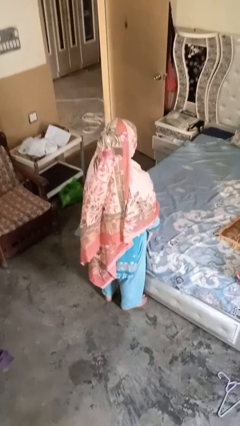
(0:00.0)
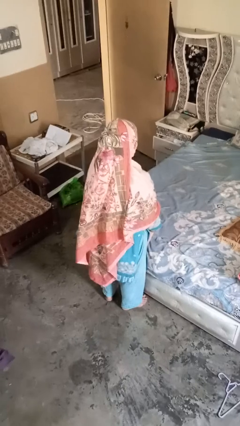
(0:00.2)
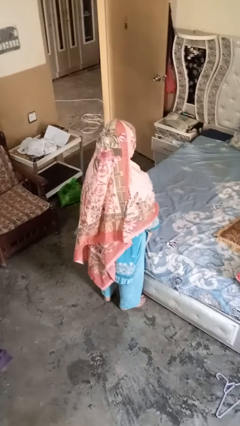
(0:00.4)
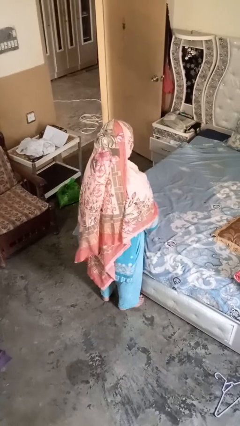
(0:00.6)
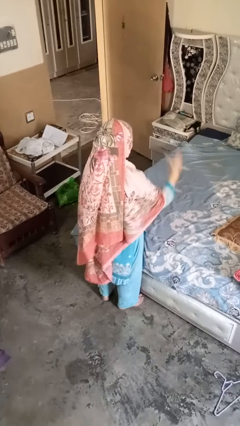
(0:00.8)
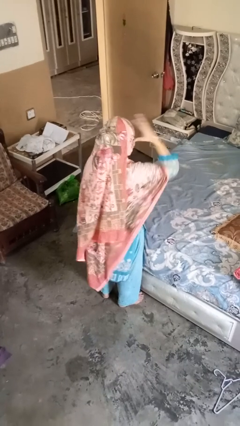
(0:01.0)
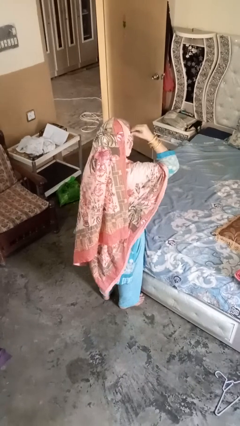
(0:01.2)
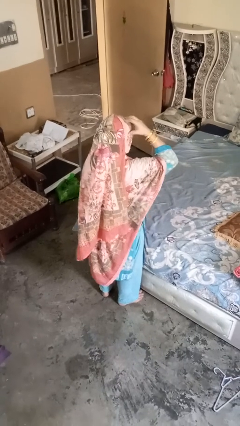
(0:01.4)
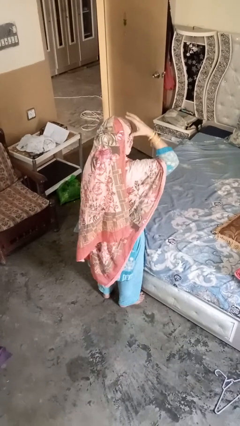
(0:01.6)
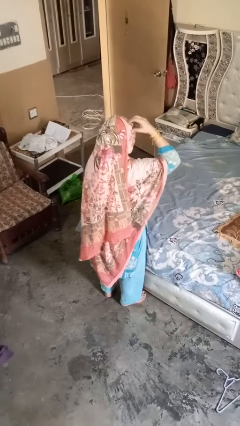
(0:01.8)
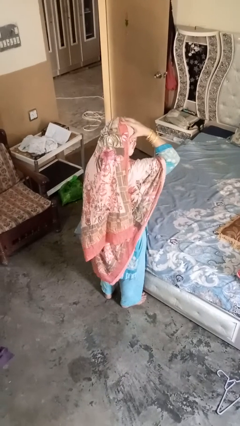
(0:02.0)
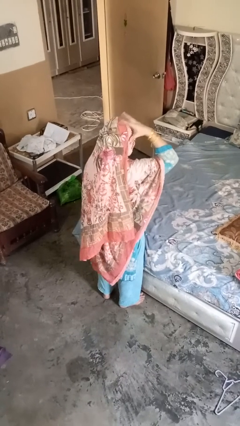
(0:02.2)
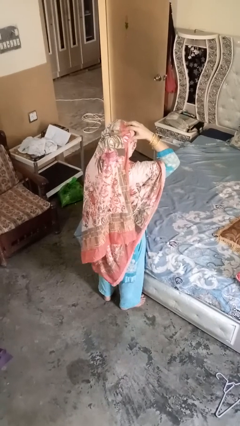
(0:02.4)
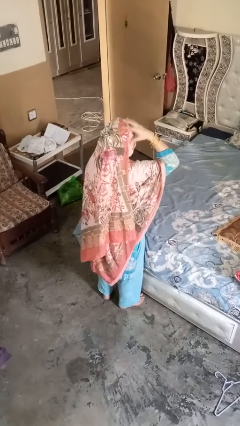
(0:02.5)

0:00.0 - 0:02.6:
person strokes hair

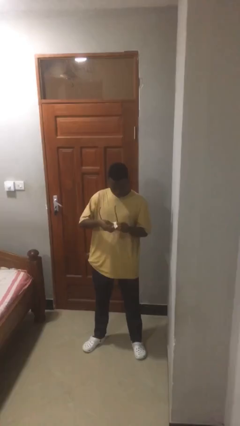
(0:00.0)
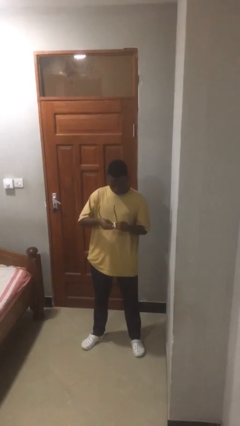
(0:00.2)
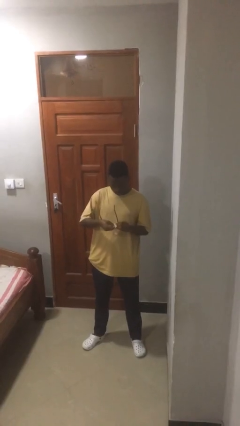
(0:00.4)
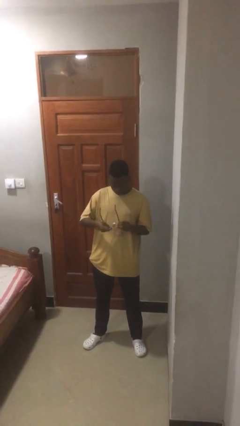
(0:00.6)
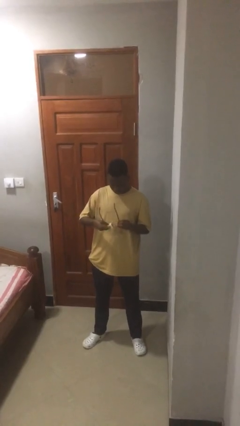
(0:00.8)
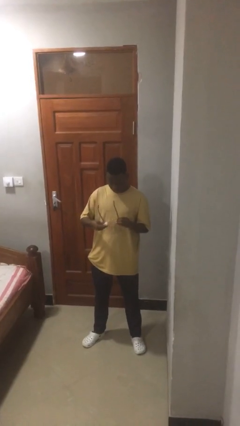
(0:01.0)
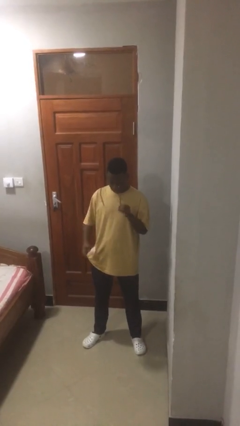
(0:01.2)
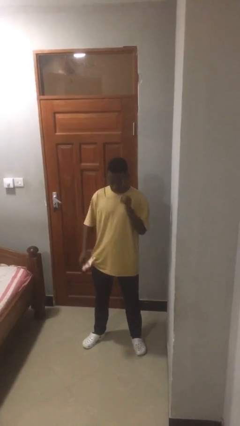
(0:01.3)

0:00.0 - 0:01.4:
person cleans eyeglasses

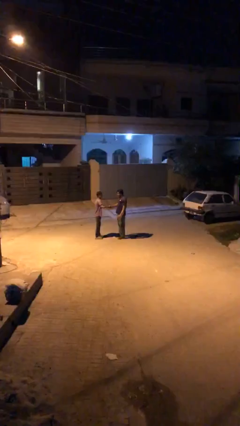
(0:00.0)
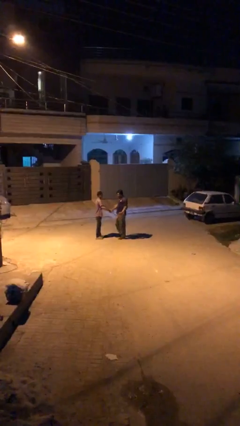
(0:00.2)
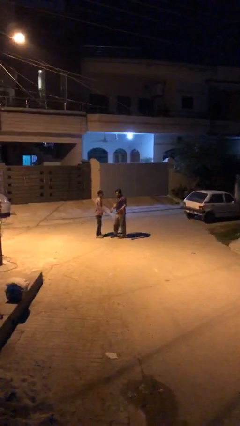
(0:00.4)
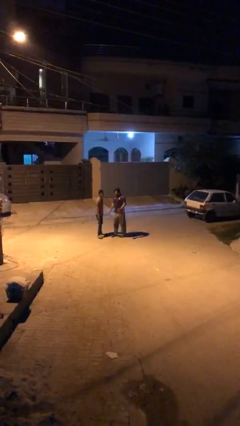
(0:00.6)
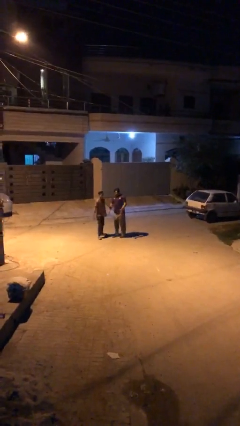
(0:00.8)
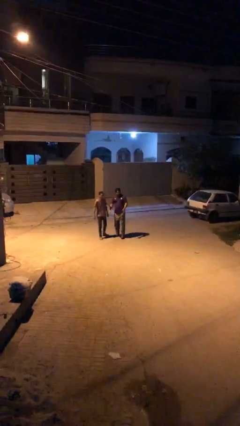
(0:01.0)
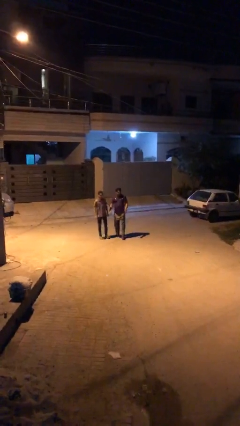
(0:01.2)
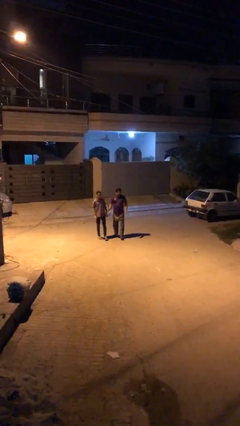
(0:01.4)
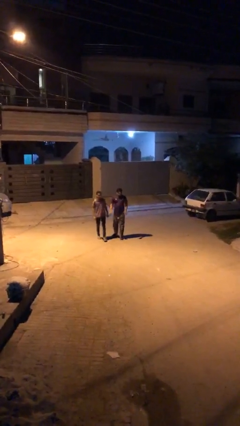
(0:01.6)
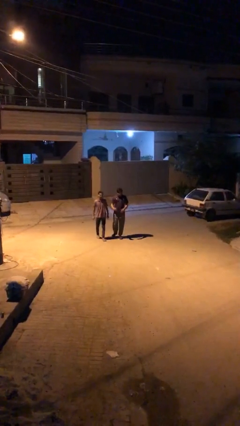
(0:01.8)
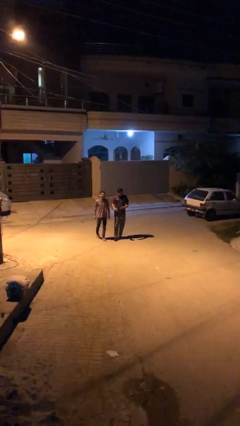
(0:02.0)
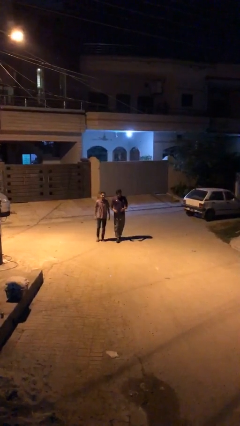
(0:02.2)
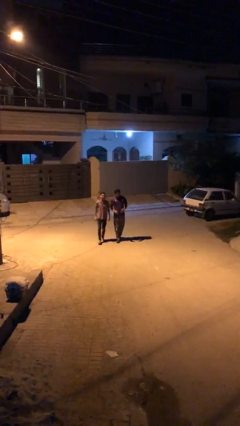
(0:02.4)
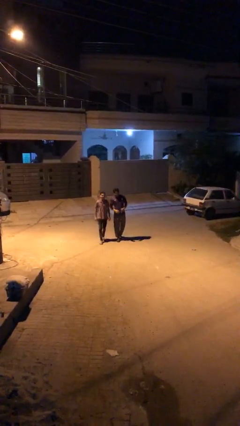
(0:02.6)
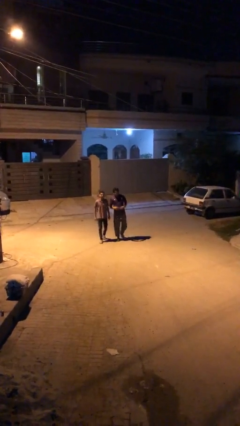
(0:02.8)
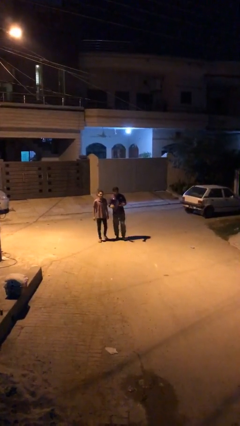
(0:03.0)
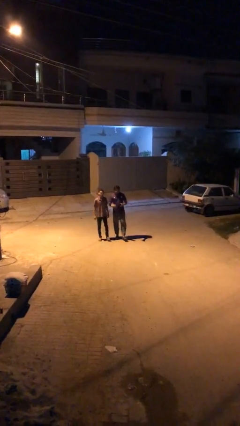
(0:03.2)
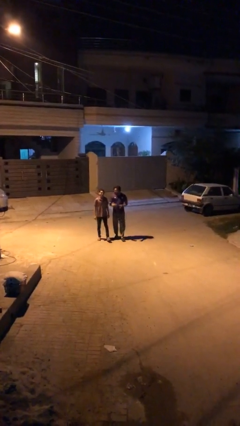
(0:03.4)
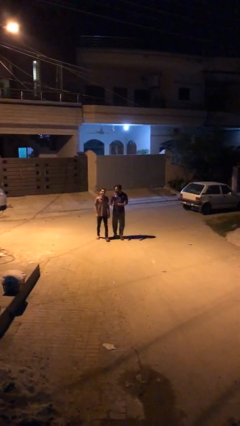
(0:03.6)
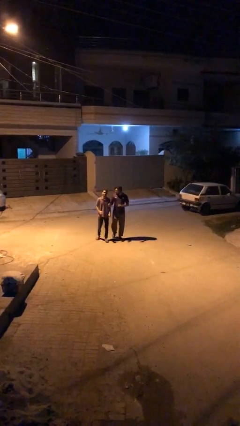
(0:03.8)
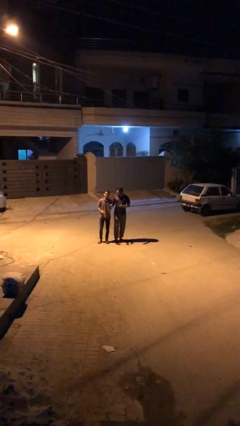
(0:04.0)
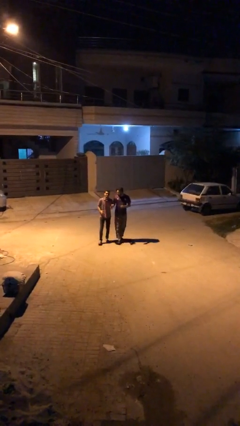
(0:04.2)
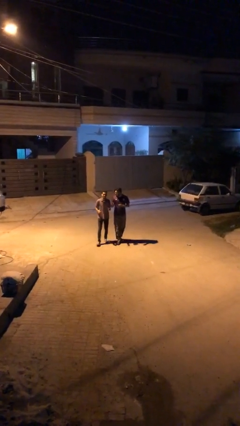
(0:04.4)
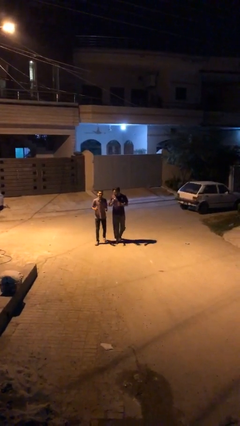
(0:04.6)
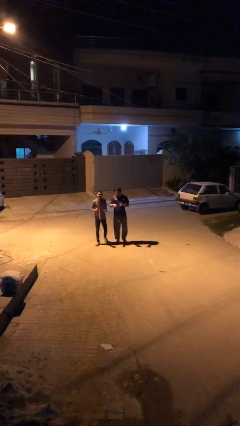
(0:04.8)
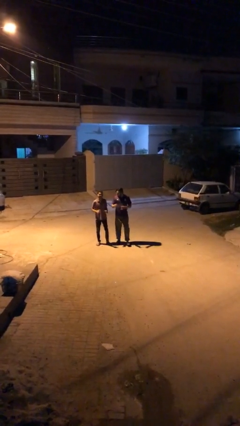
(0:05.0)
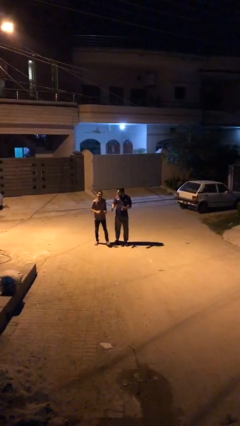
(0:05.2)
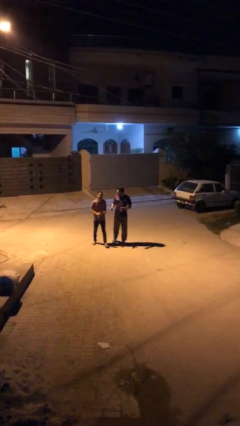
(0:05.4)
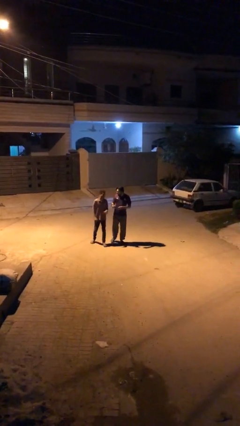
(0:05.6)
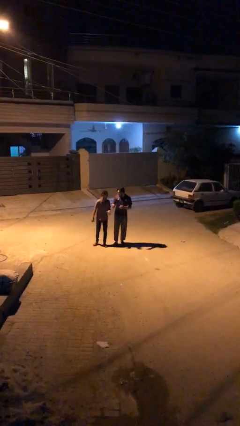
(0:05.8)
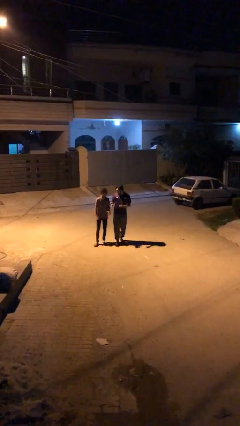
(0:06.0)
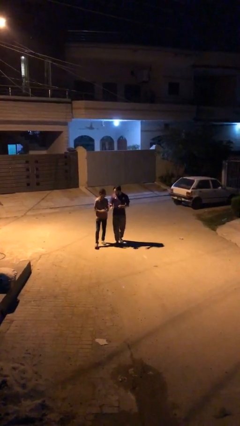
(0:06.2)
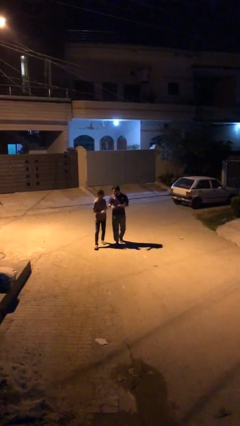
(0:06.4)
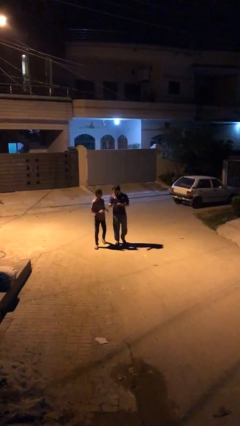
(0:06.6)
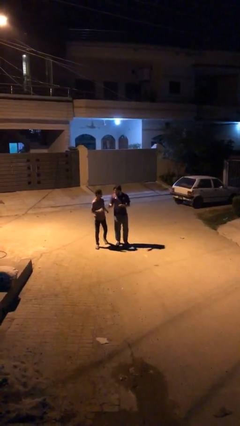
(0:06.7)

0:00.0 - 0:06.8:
person talks to person

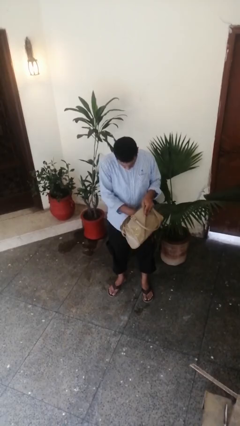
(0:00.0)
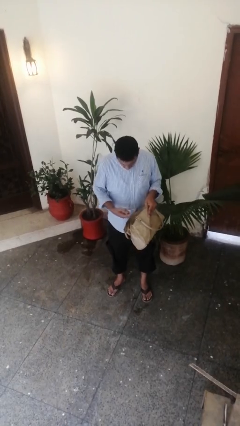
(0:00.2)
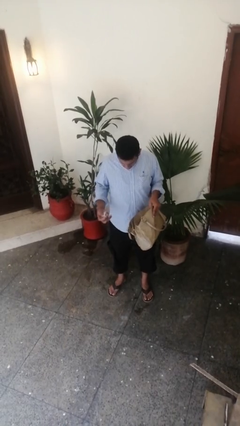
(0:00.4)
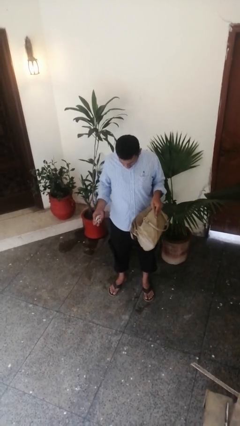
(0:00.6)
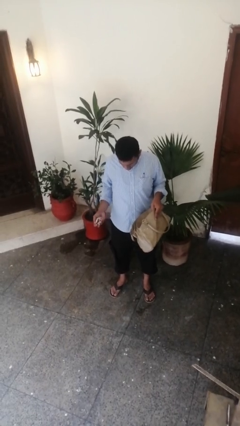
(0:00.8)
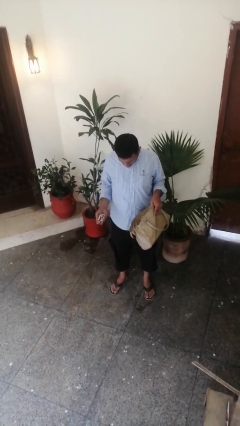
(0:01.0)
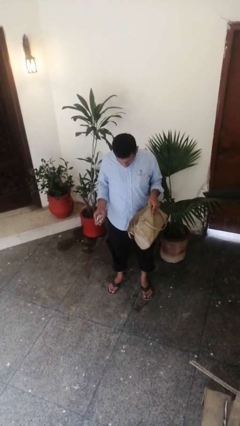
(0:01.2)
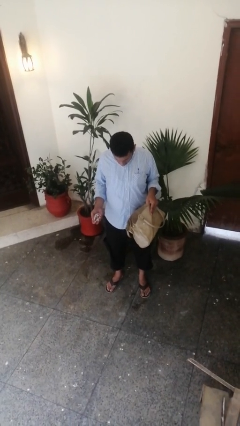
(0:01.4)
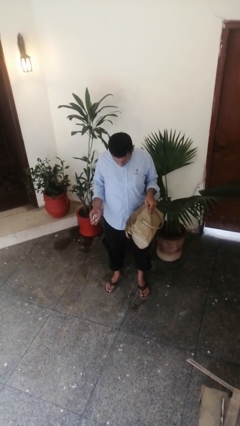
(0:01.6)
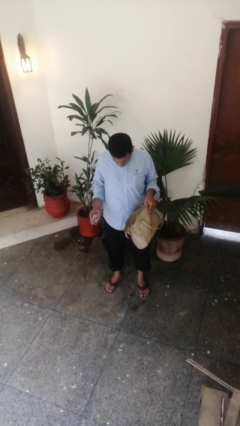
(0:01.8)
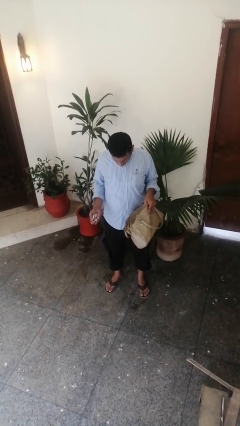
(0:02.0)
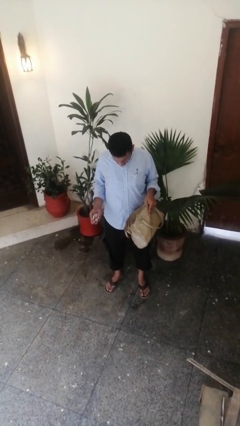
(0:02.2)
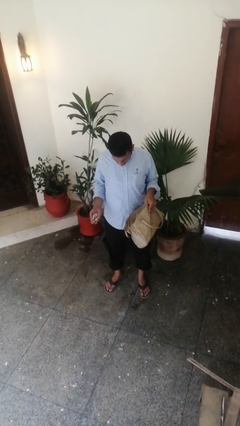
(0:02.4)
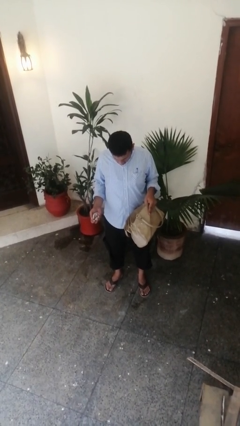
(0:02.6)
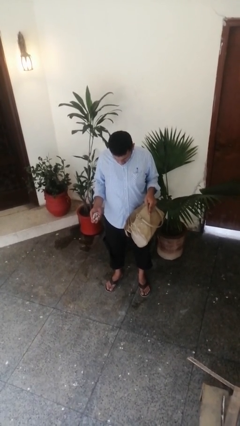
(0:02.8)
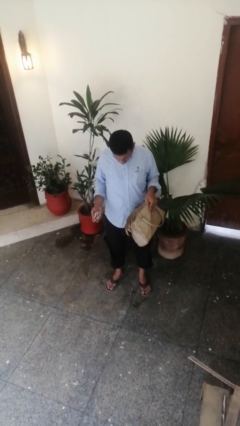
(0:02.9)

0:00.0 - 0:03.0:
person takes object from purse

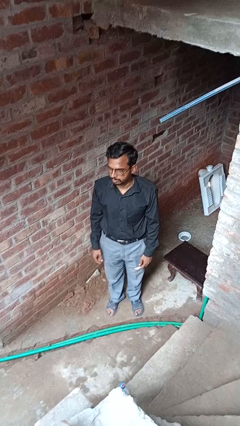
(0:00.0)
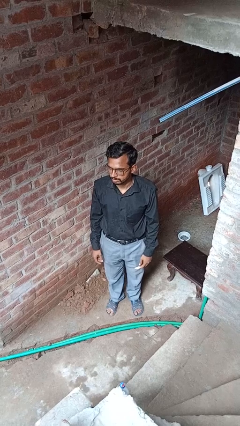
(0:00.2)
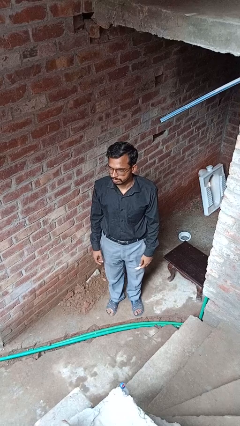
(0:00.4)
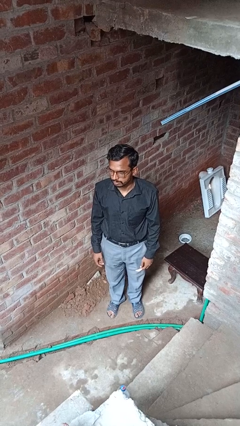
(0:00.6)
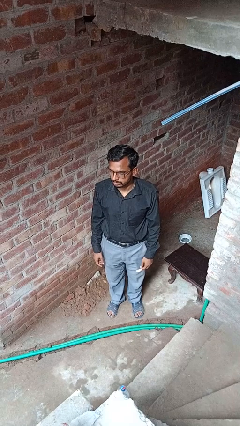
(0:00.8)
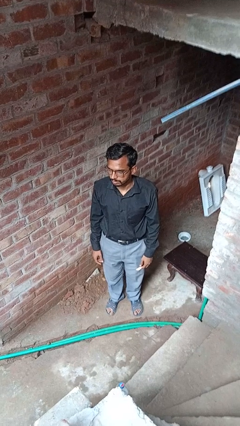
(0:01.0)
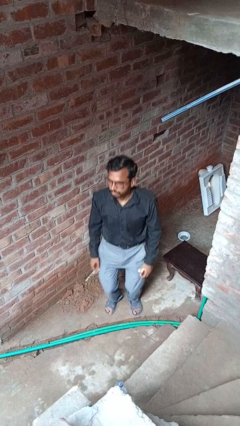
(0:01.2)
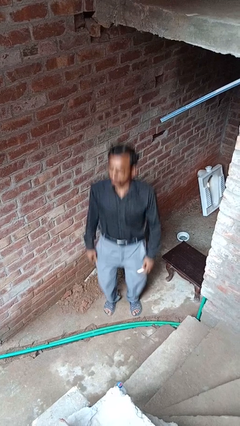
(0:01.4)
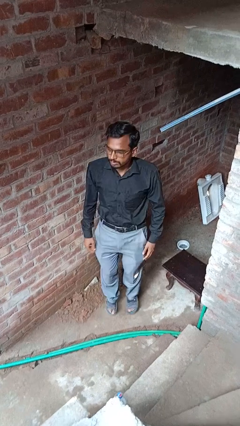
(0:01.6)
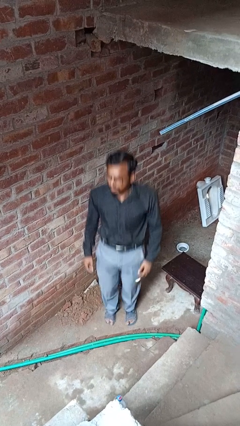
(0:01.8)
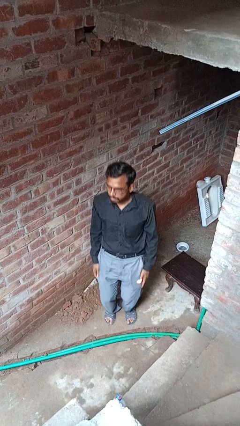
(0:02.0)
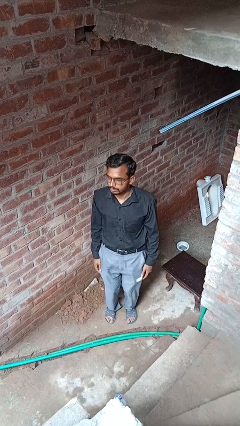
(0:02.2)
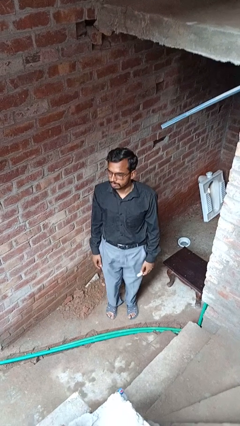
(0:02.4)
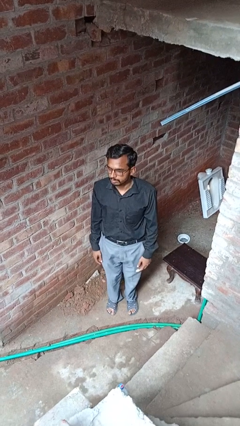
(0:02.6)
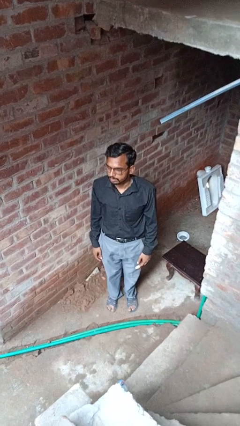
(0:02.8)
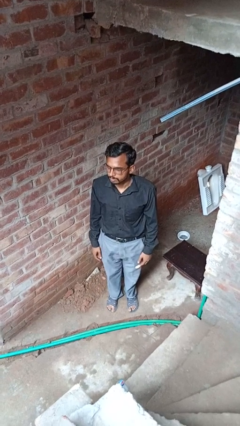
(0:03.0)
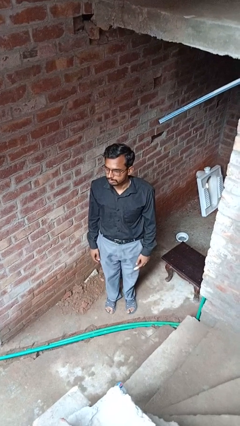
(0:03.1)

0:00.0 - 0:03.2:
person jumps

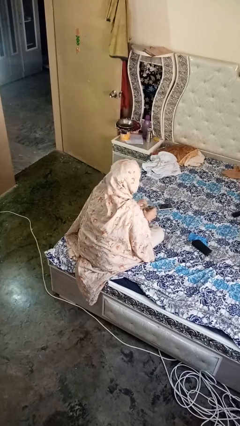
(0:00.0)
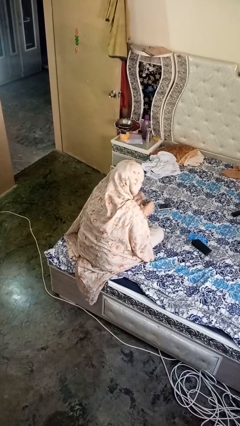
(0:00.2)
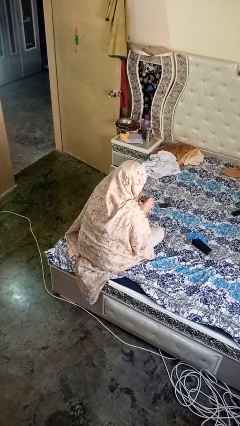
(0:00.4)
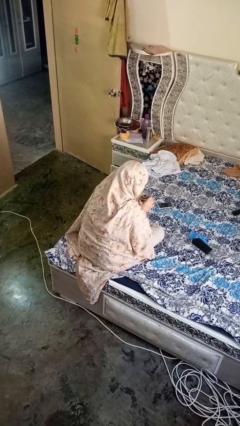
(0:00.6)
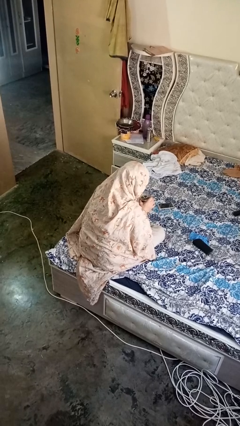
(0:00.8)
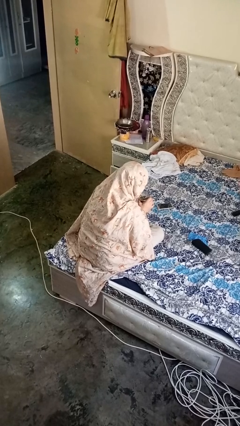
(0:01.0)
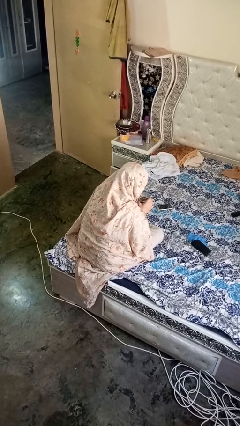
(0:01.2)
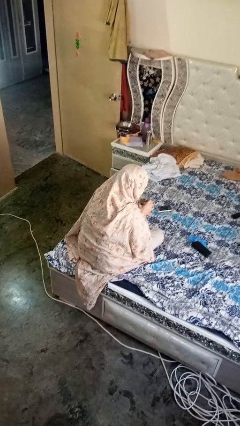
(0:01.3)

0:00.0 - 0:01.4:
person drinks from straw
